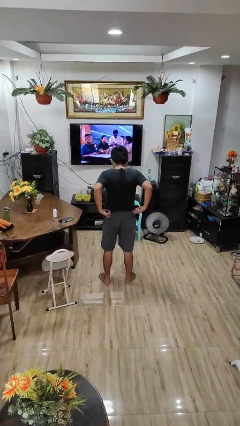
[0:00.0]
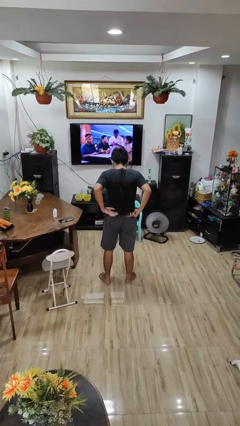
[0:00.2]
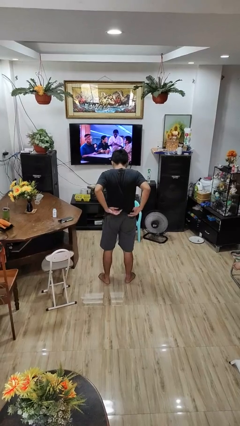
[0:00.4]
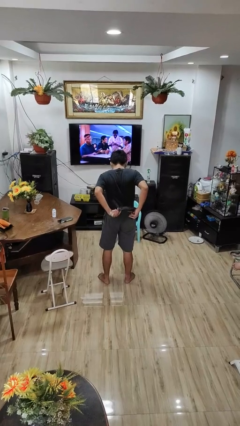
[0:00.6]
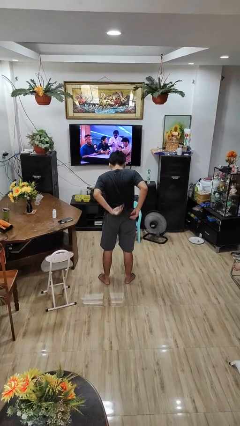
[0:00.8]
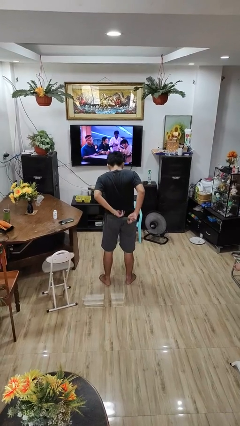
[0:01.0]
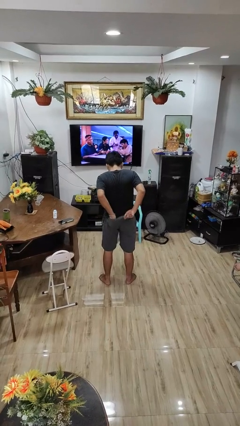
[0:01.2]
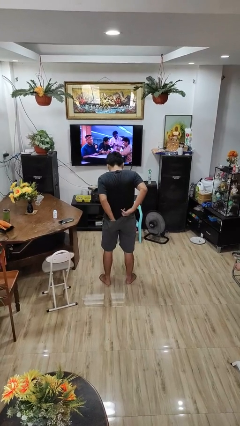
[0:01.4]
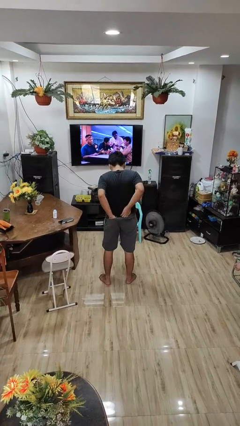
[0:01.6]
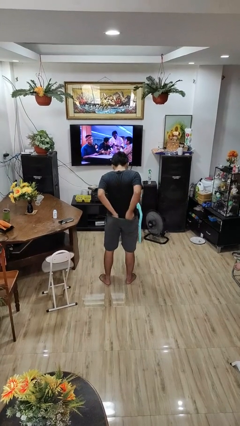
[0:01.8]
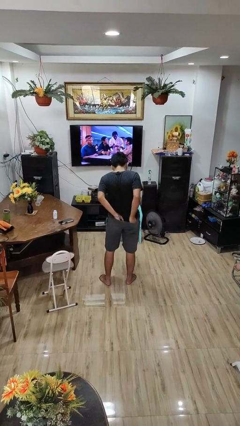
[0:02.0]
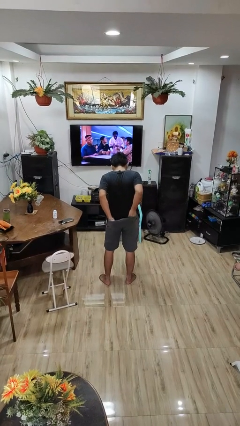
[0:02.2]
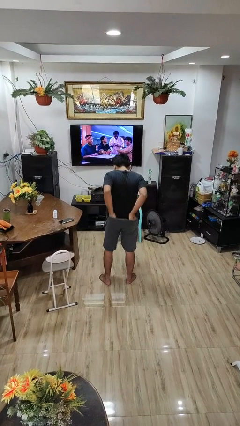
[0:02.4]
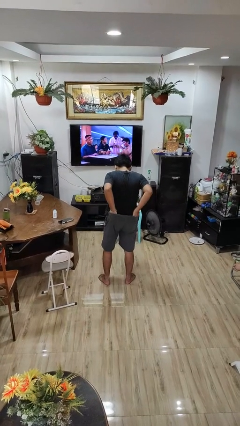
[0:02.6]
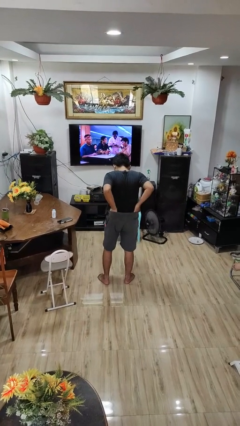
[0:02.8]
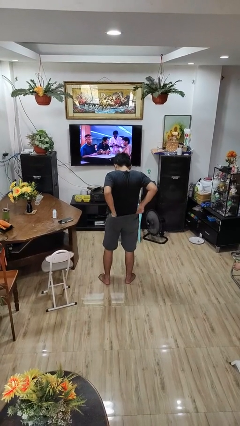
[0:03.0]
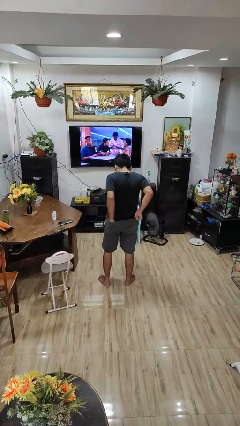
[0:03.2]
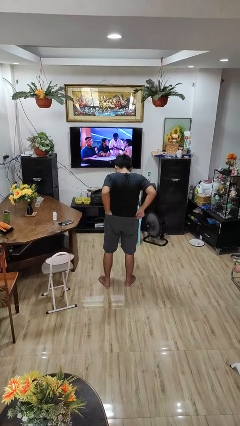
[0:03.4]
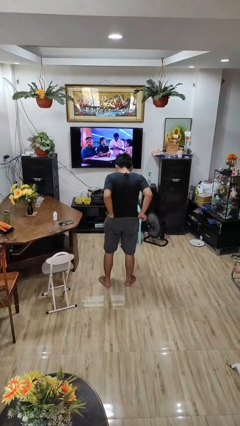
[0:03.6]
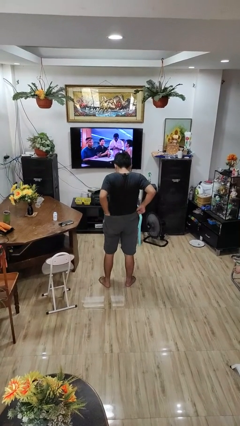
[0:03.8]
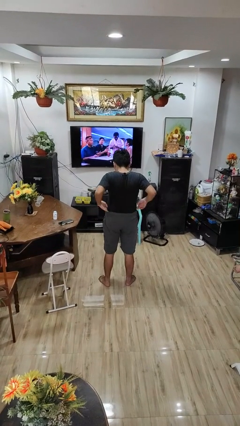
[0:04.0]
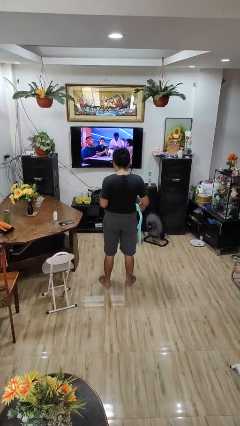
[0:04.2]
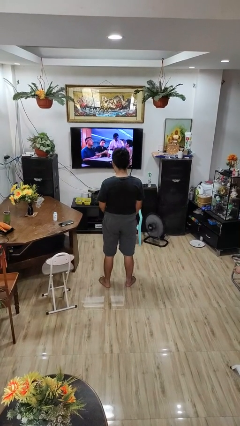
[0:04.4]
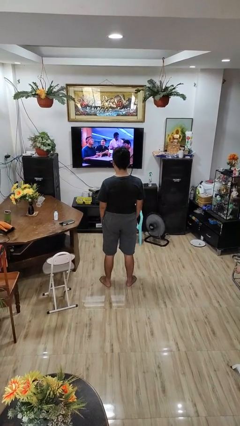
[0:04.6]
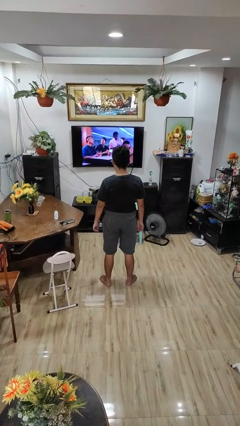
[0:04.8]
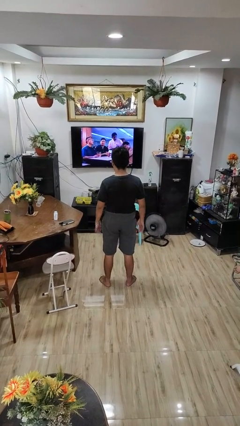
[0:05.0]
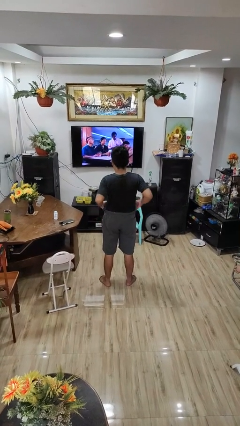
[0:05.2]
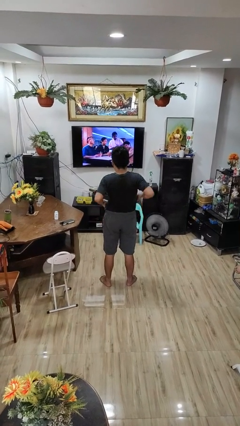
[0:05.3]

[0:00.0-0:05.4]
person tucks in shirt

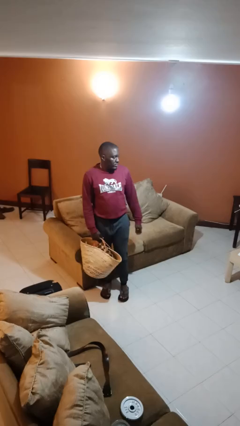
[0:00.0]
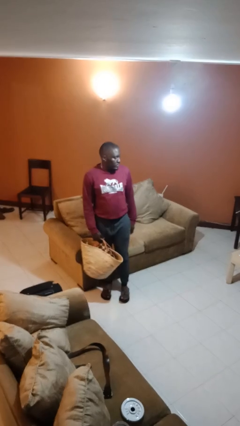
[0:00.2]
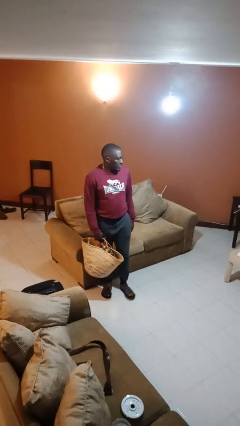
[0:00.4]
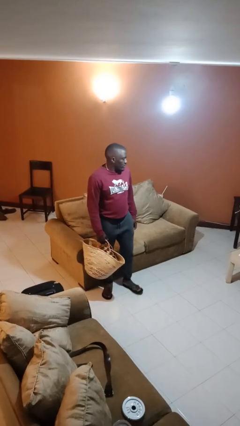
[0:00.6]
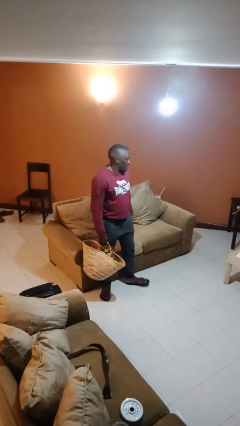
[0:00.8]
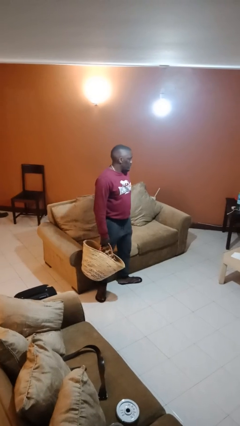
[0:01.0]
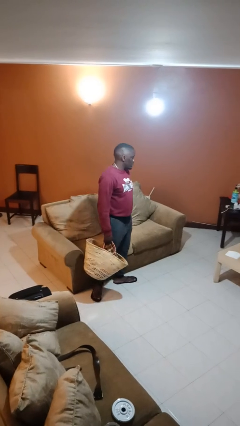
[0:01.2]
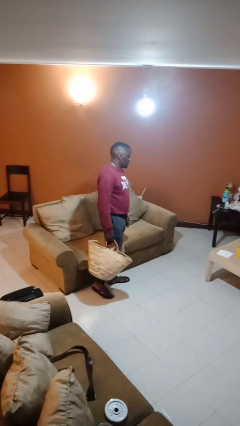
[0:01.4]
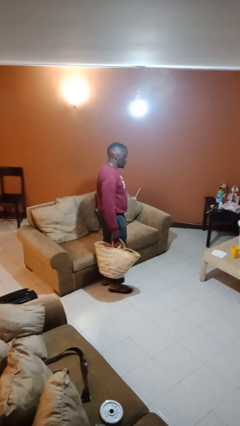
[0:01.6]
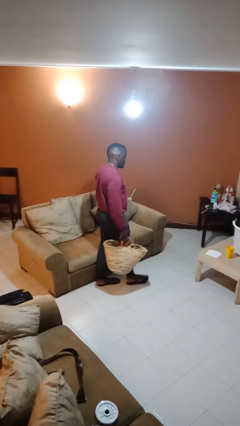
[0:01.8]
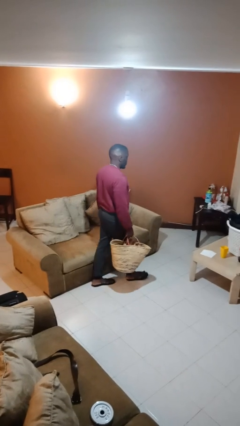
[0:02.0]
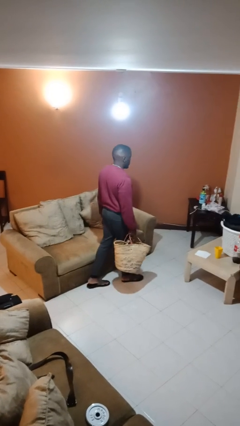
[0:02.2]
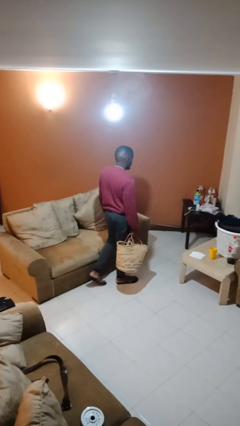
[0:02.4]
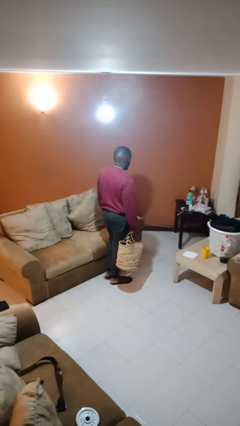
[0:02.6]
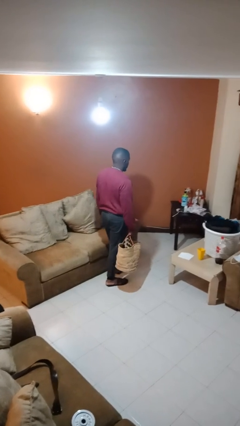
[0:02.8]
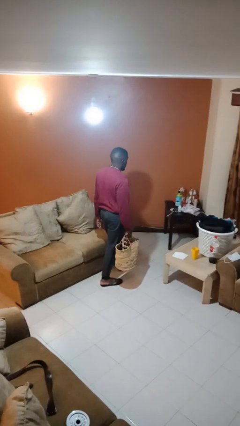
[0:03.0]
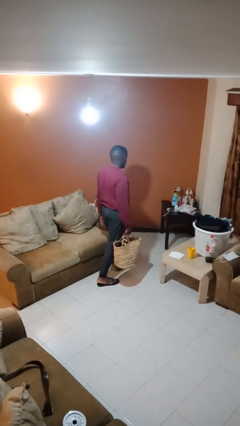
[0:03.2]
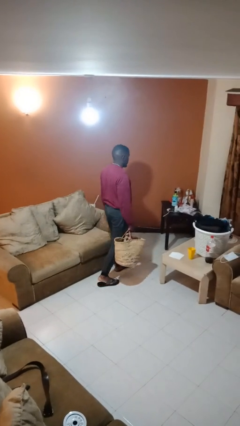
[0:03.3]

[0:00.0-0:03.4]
person carries groceries

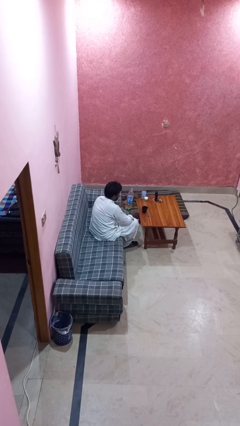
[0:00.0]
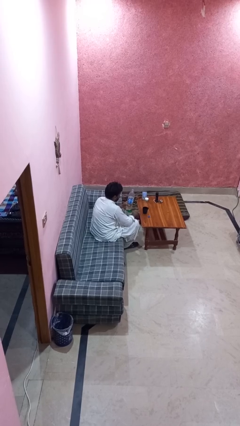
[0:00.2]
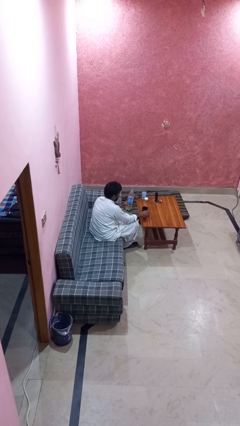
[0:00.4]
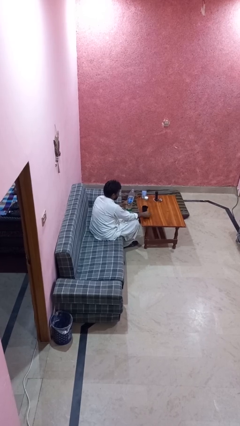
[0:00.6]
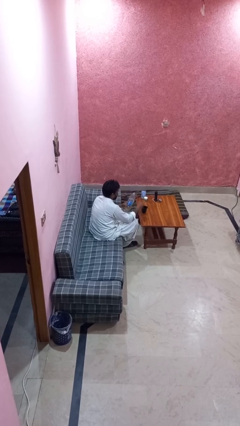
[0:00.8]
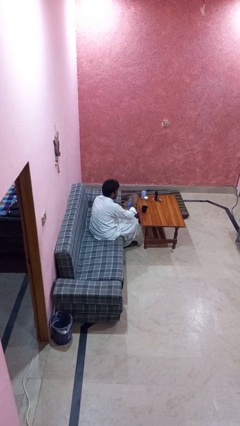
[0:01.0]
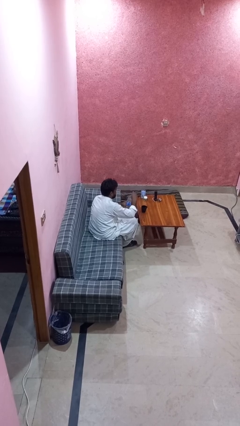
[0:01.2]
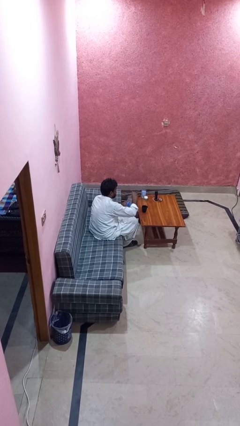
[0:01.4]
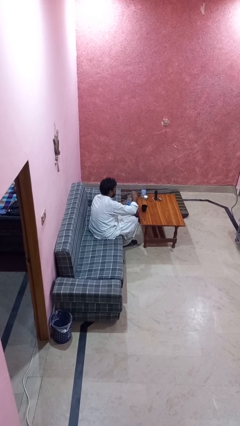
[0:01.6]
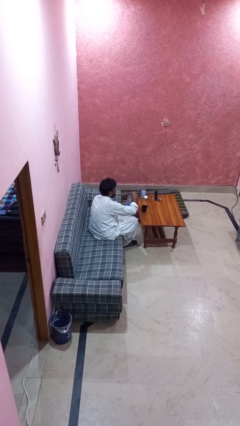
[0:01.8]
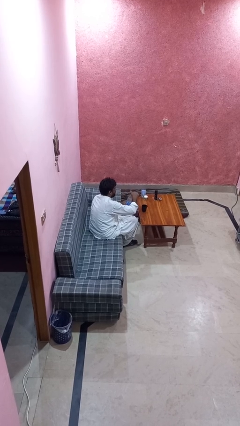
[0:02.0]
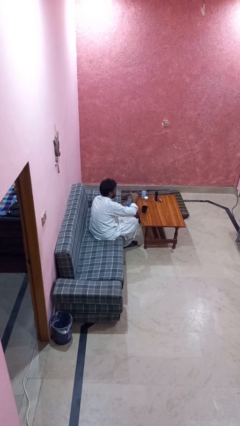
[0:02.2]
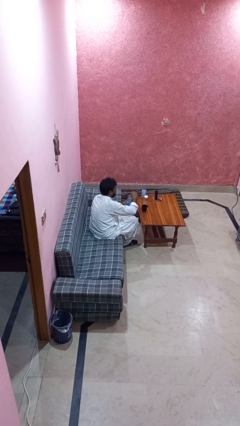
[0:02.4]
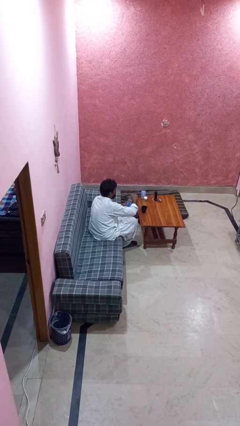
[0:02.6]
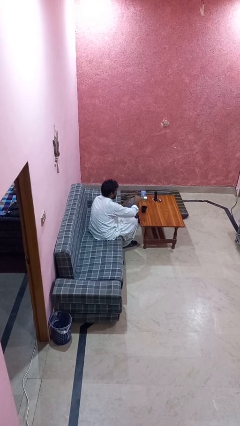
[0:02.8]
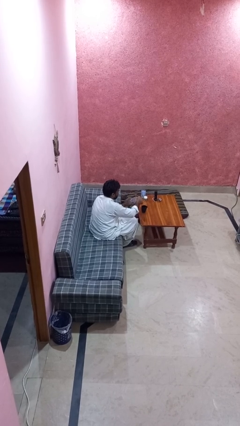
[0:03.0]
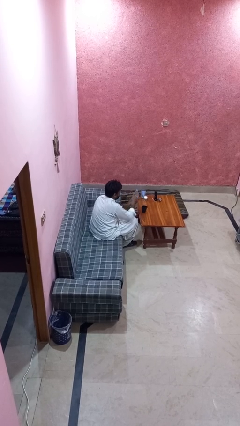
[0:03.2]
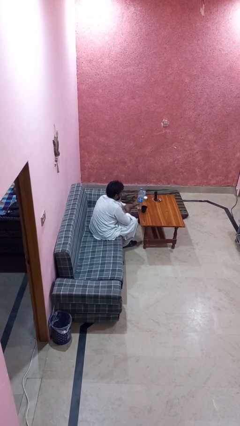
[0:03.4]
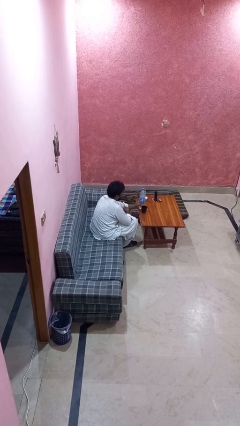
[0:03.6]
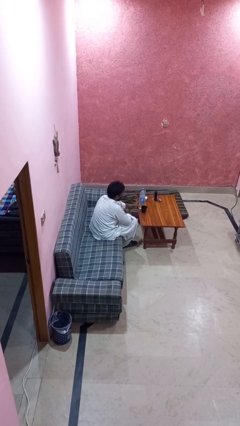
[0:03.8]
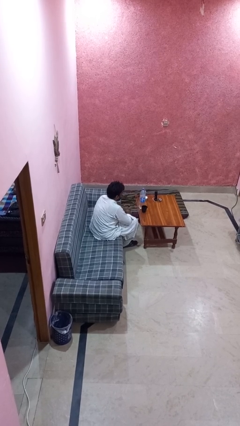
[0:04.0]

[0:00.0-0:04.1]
person screws lid to bottle

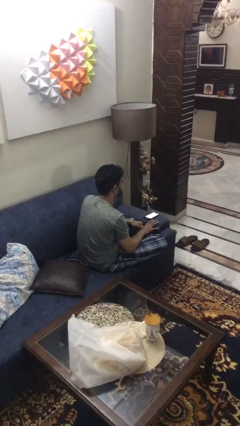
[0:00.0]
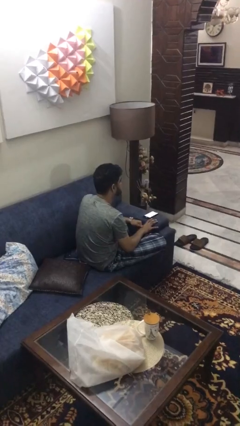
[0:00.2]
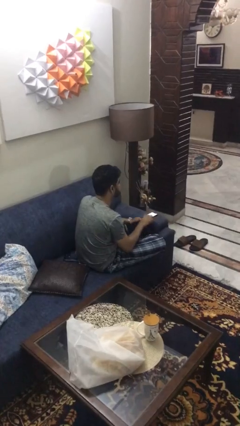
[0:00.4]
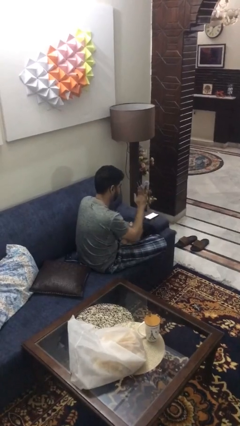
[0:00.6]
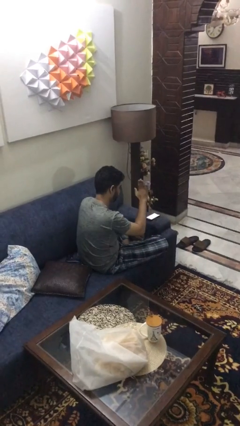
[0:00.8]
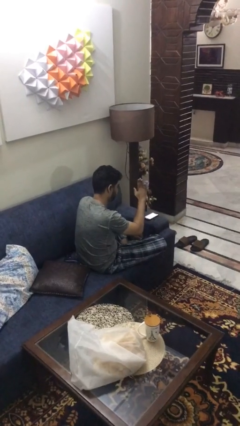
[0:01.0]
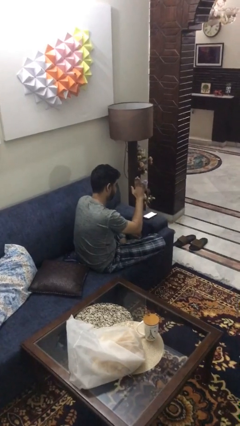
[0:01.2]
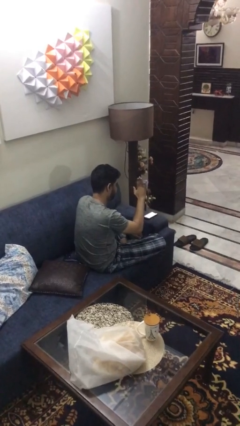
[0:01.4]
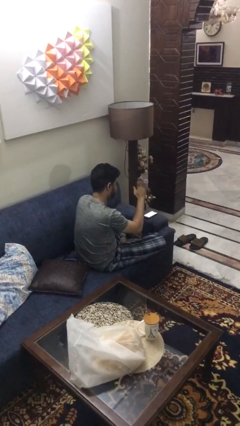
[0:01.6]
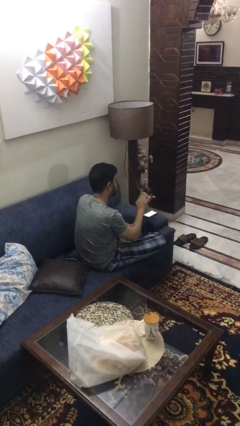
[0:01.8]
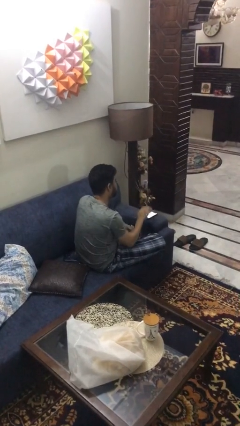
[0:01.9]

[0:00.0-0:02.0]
person gestures stop

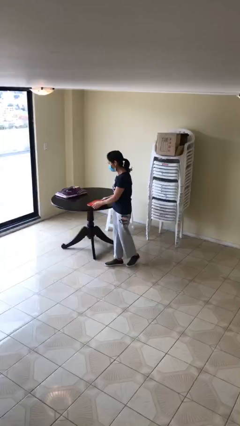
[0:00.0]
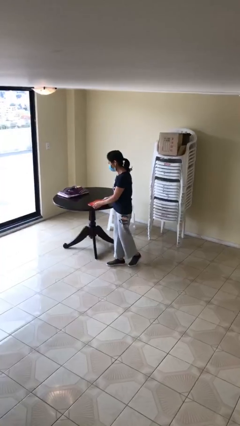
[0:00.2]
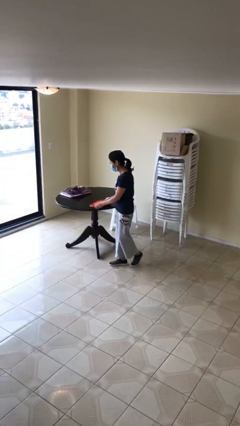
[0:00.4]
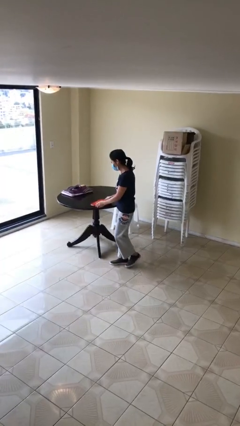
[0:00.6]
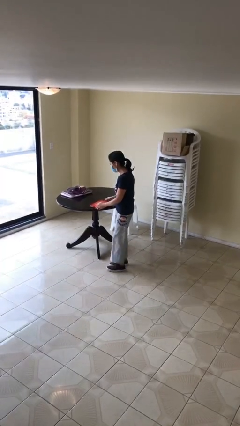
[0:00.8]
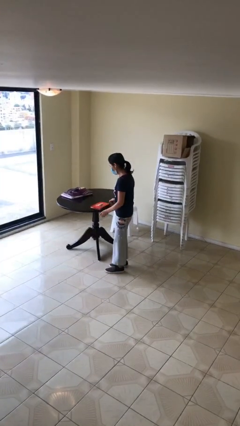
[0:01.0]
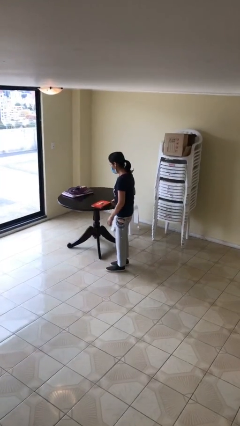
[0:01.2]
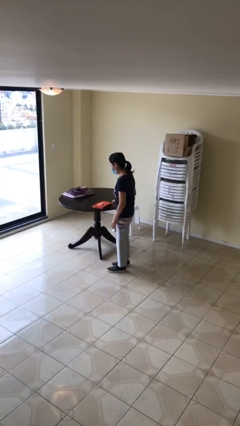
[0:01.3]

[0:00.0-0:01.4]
person puts down object on table

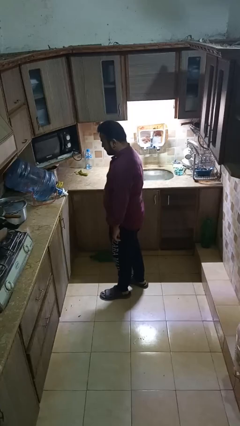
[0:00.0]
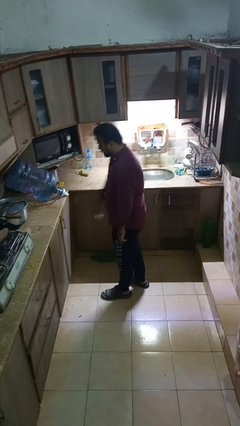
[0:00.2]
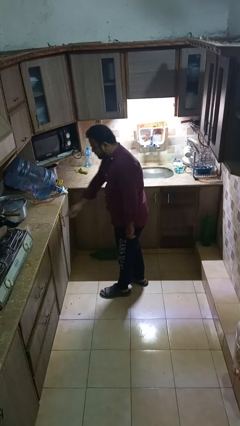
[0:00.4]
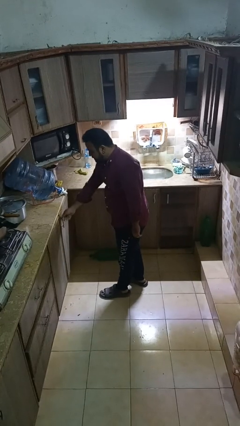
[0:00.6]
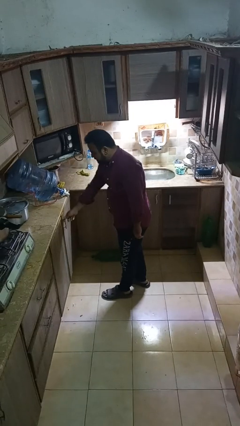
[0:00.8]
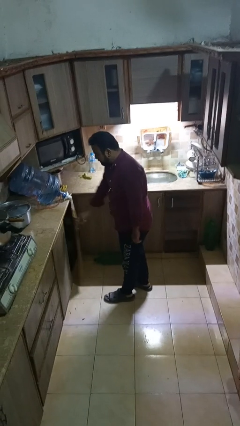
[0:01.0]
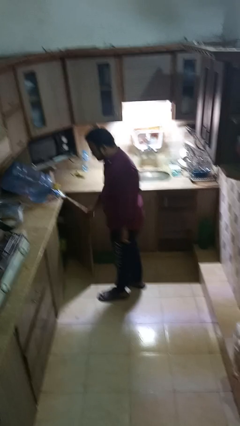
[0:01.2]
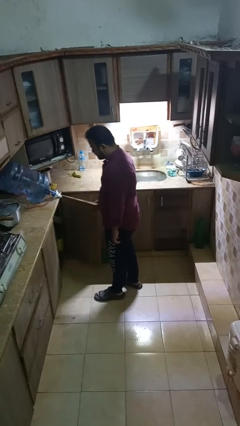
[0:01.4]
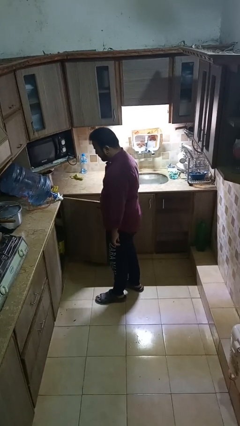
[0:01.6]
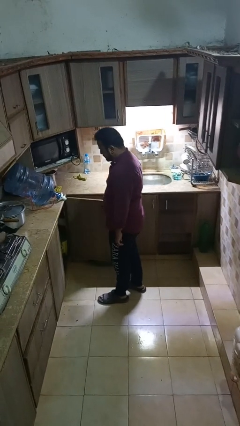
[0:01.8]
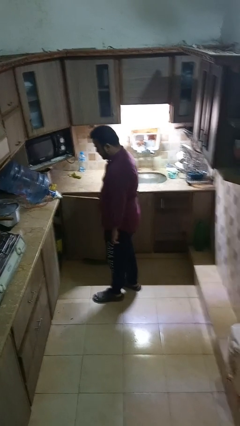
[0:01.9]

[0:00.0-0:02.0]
person opens cabinet
